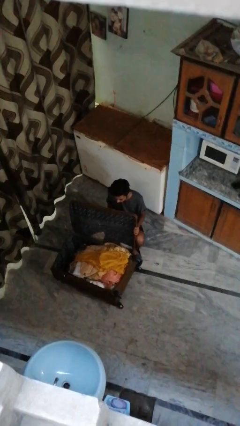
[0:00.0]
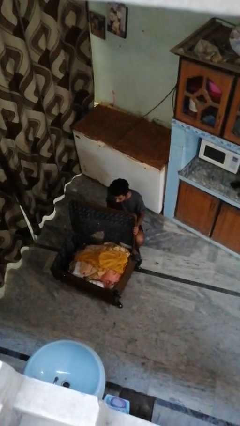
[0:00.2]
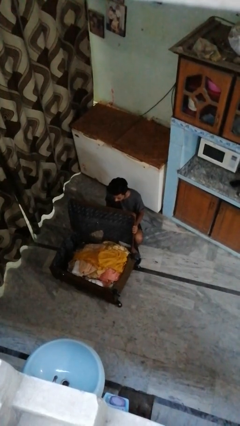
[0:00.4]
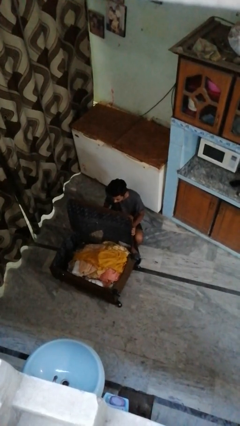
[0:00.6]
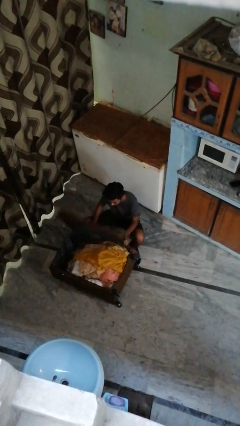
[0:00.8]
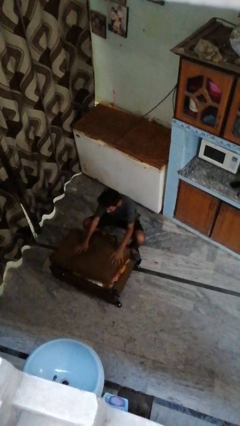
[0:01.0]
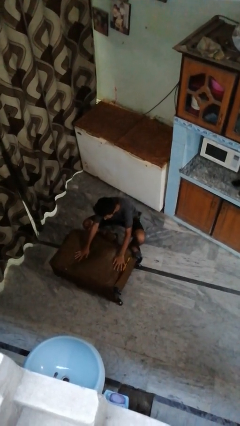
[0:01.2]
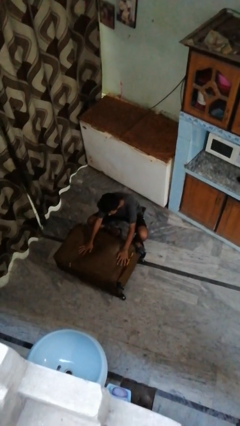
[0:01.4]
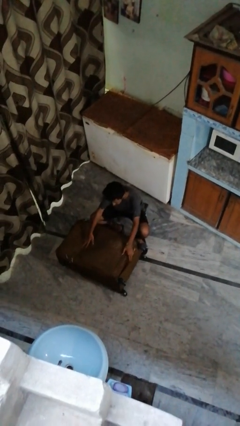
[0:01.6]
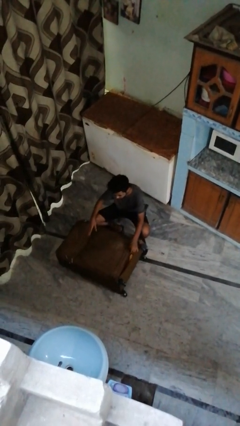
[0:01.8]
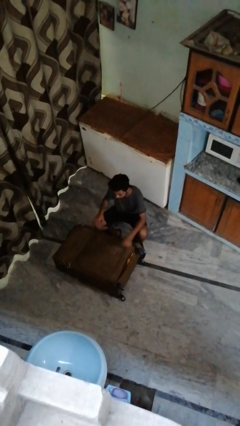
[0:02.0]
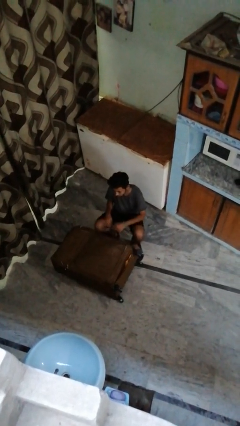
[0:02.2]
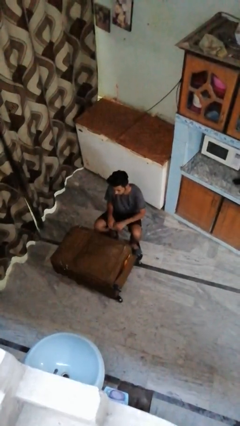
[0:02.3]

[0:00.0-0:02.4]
person closes suitcase

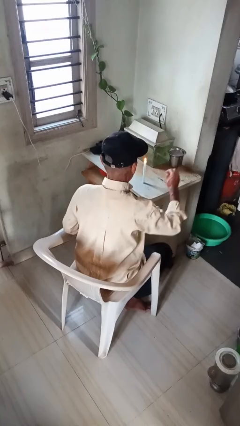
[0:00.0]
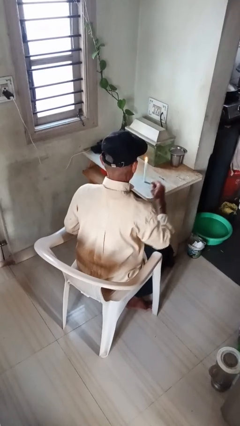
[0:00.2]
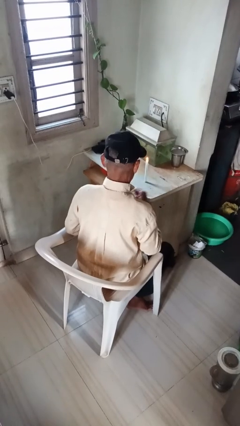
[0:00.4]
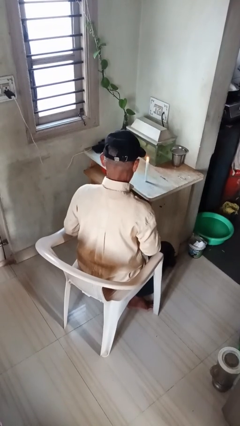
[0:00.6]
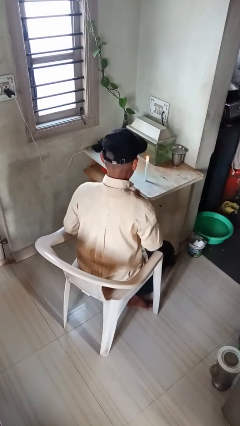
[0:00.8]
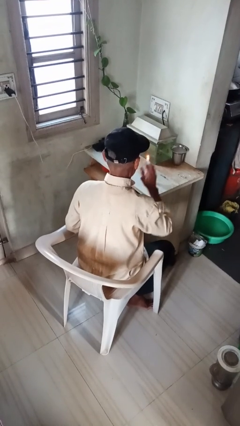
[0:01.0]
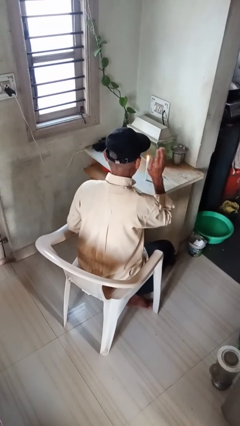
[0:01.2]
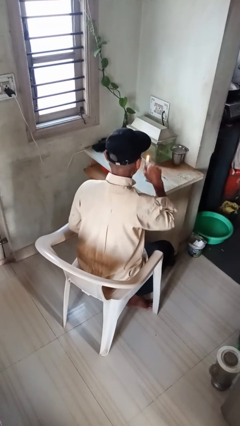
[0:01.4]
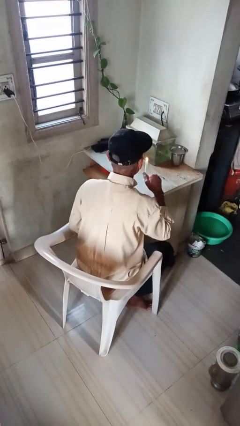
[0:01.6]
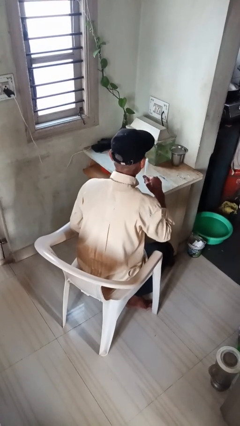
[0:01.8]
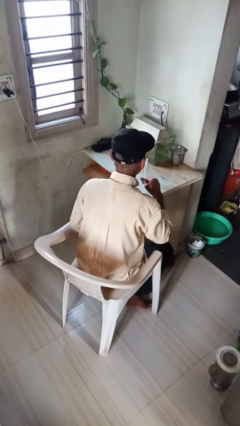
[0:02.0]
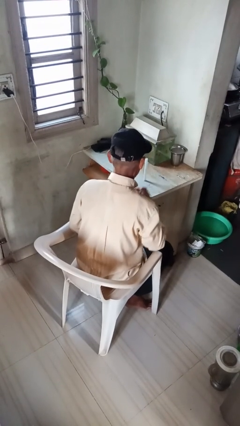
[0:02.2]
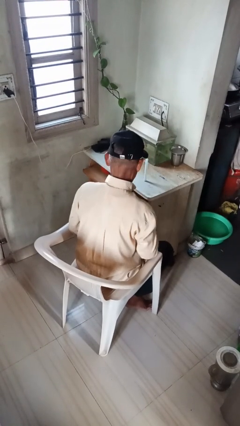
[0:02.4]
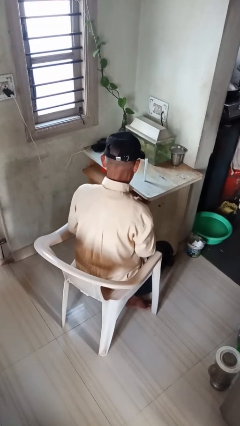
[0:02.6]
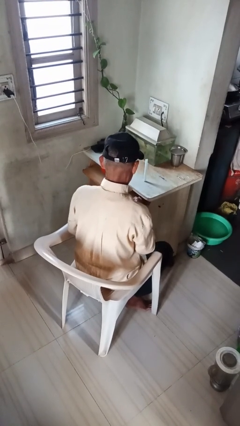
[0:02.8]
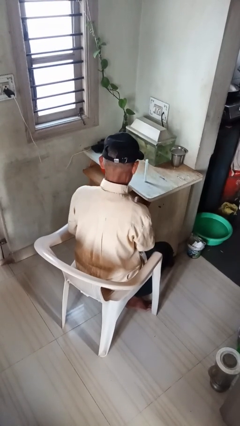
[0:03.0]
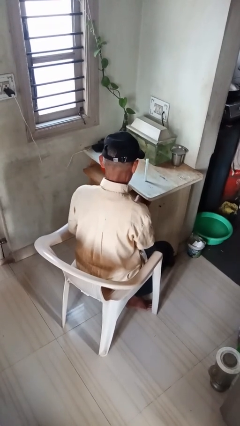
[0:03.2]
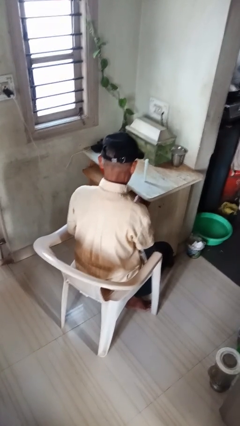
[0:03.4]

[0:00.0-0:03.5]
person extinguishes candle

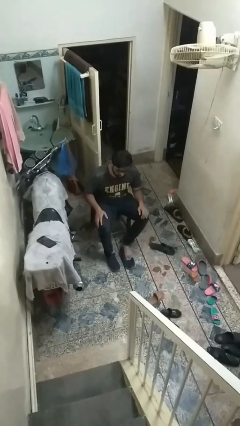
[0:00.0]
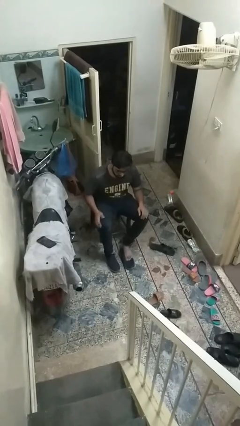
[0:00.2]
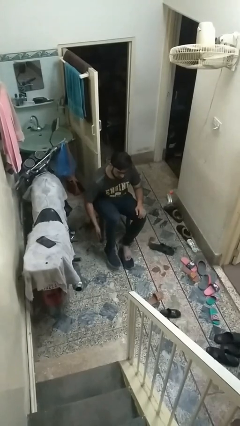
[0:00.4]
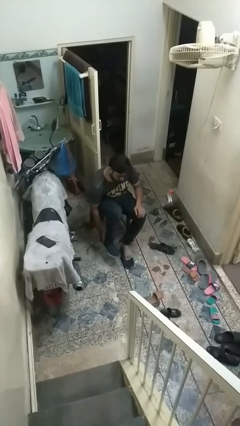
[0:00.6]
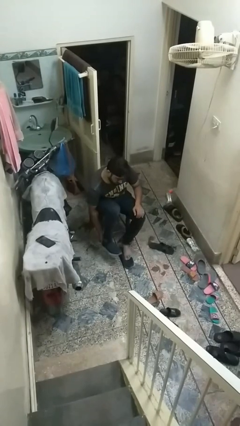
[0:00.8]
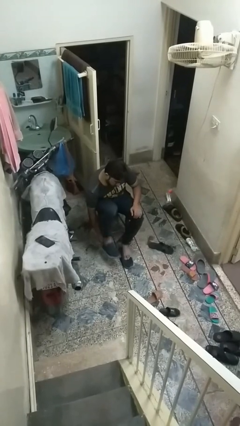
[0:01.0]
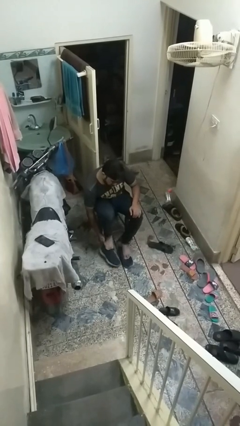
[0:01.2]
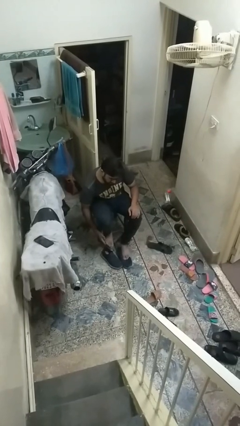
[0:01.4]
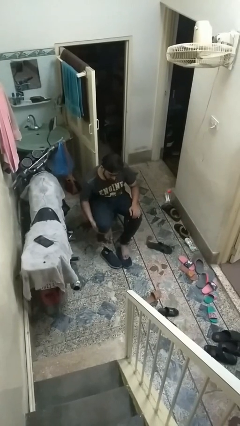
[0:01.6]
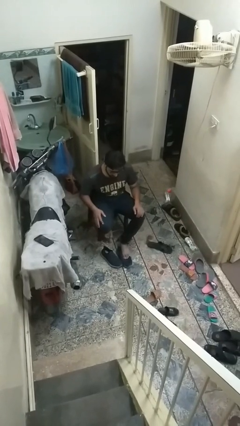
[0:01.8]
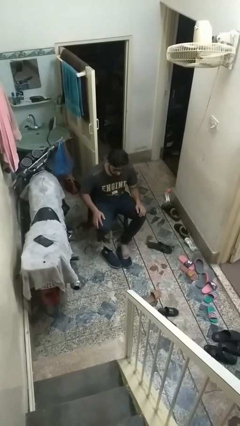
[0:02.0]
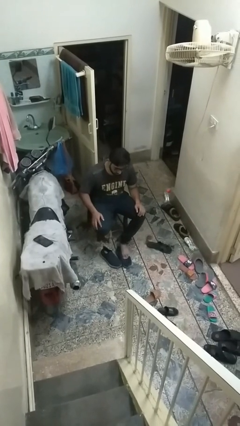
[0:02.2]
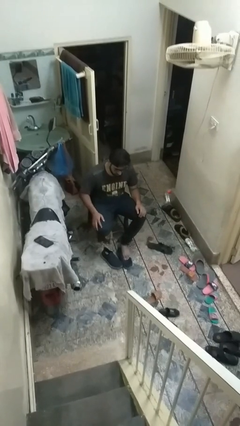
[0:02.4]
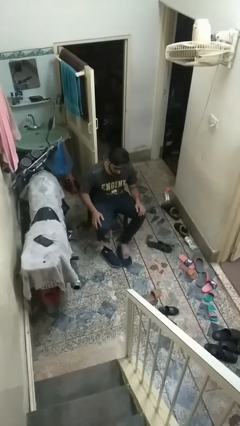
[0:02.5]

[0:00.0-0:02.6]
person takes off shoes

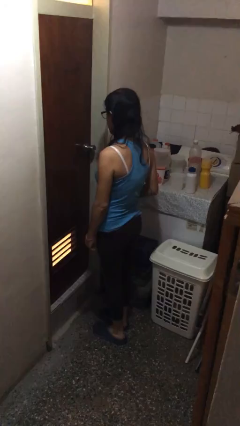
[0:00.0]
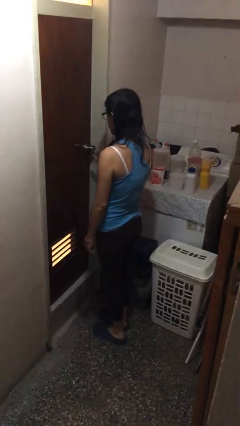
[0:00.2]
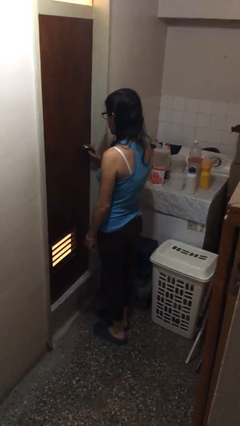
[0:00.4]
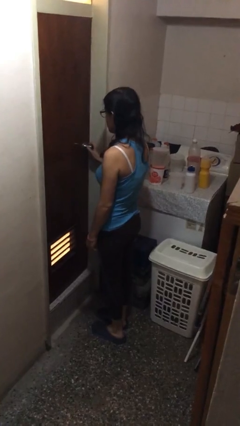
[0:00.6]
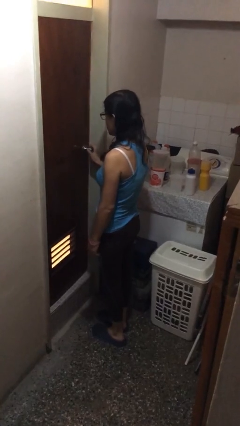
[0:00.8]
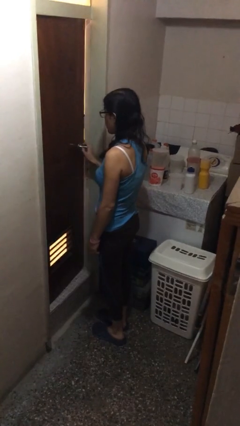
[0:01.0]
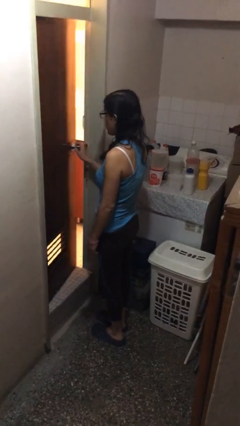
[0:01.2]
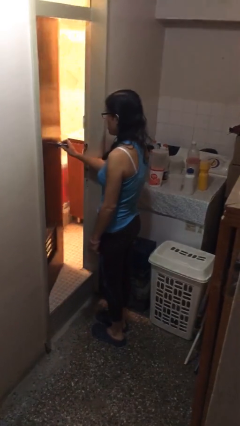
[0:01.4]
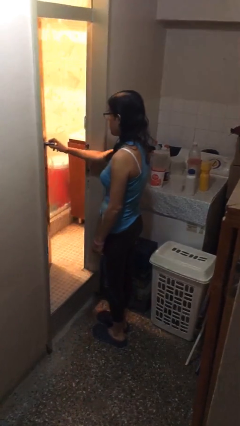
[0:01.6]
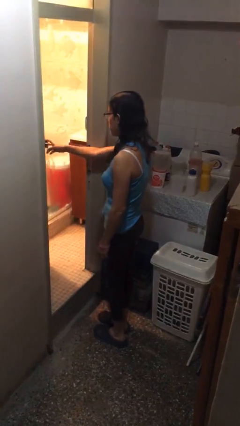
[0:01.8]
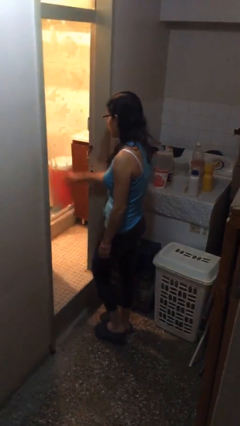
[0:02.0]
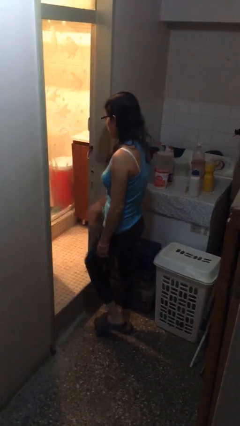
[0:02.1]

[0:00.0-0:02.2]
person opens facility door

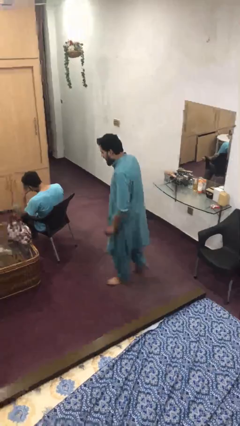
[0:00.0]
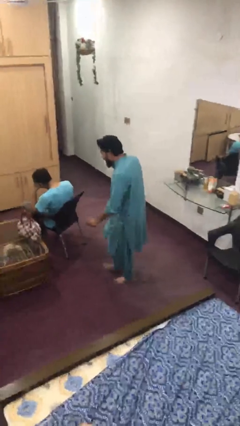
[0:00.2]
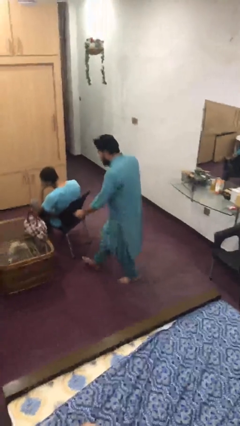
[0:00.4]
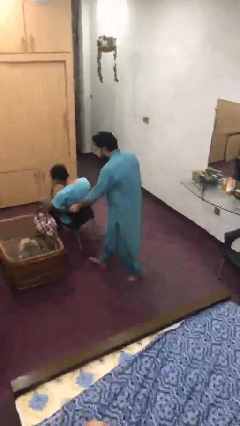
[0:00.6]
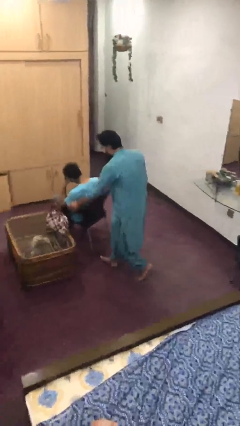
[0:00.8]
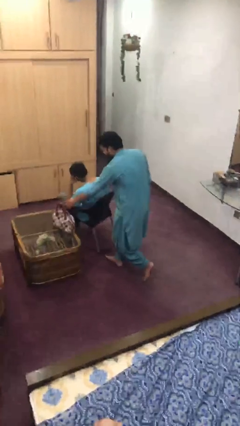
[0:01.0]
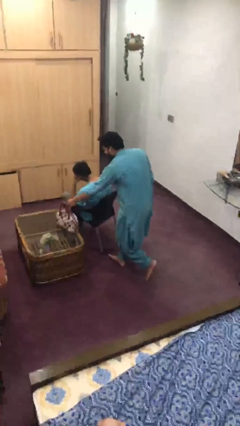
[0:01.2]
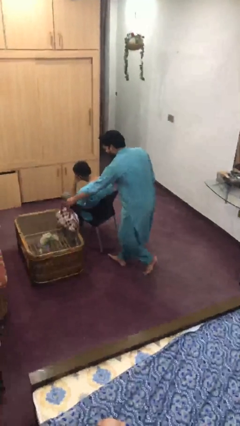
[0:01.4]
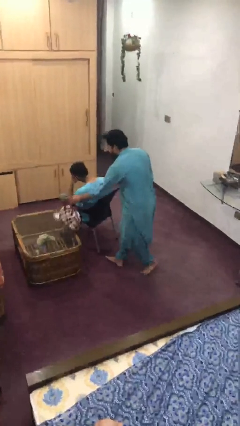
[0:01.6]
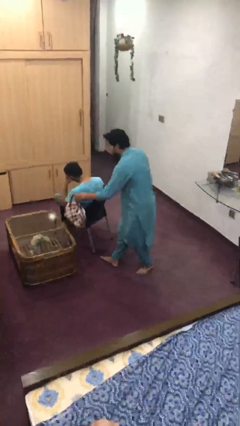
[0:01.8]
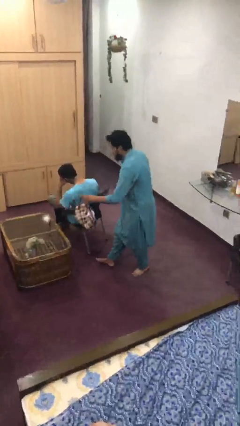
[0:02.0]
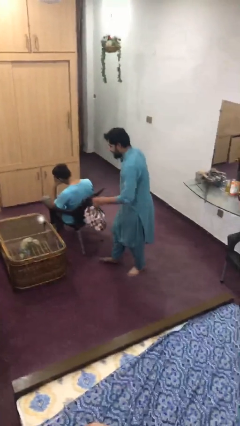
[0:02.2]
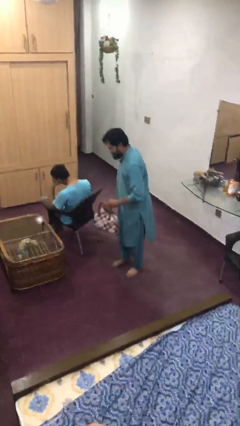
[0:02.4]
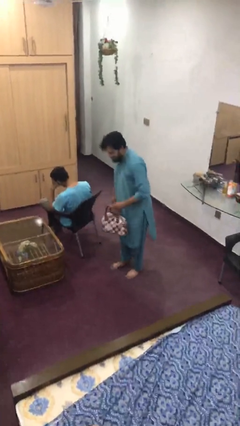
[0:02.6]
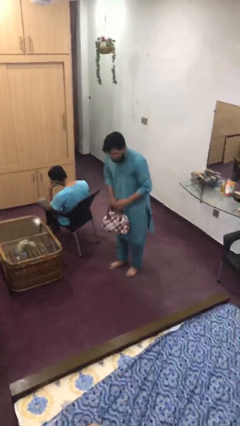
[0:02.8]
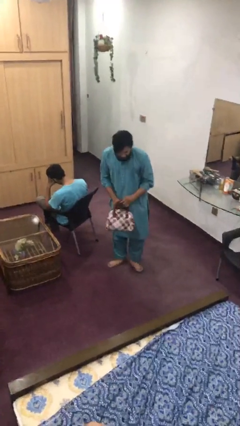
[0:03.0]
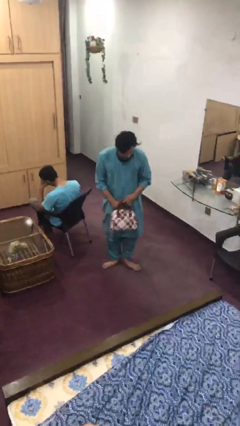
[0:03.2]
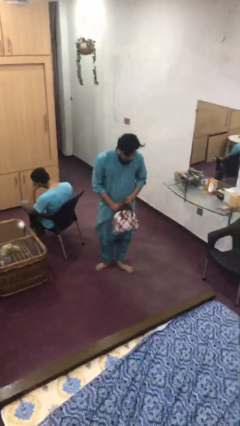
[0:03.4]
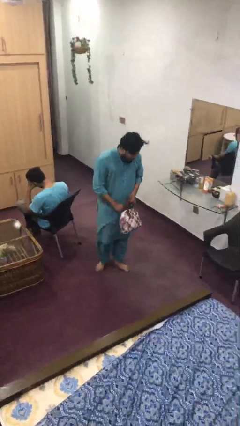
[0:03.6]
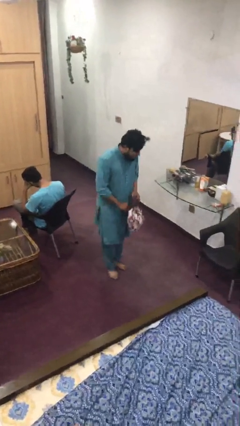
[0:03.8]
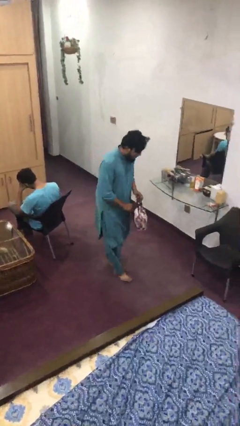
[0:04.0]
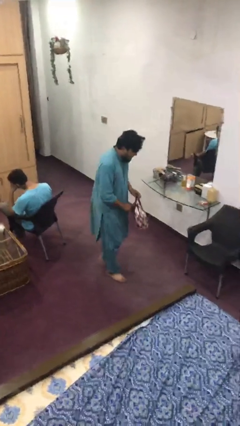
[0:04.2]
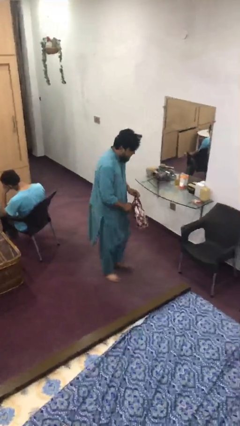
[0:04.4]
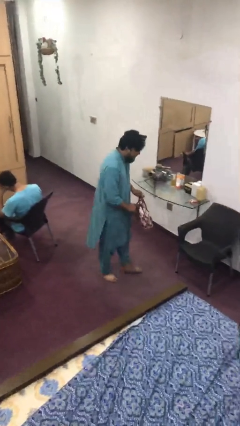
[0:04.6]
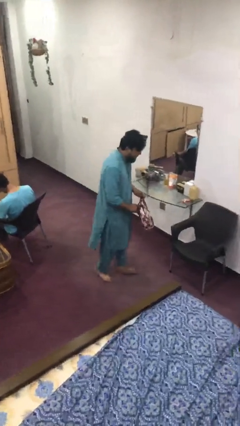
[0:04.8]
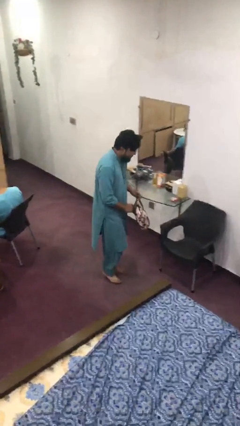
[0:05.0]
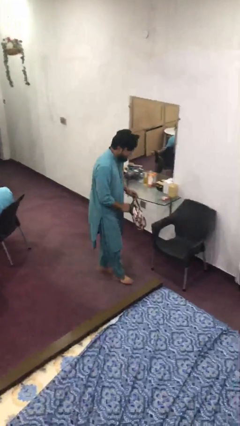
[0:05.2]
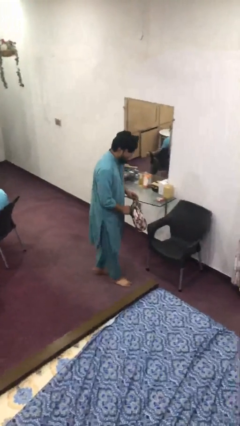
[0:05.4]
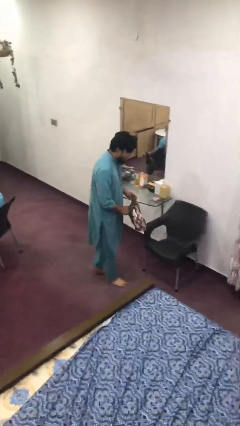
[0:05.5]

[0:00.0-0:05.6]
person steals object from person

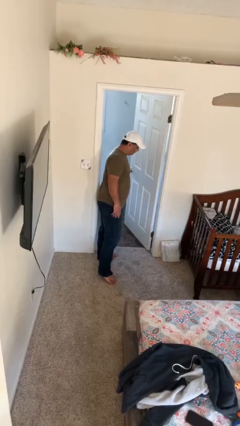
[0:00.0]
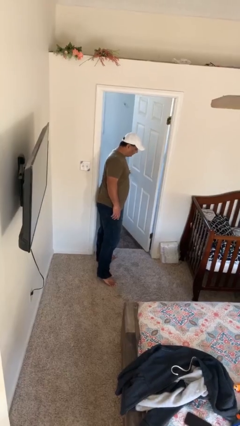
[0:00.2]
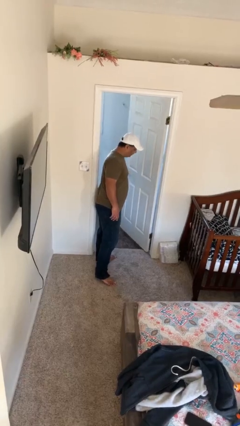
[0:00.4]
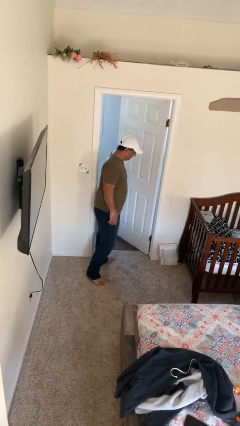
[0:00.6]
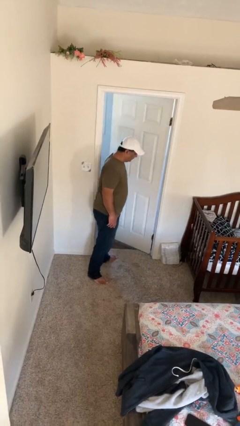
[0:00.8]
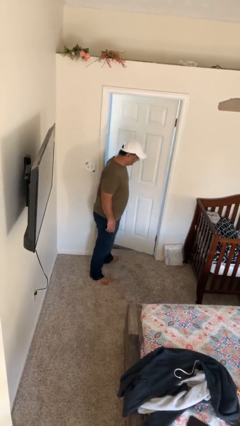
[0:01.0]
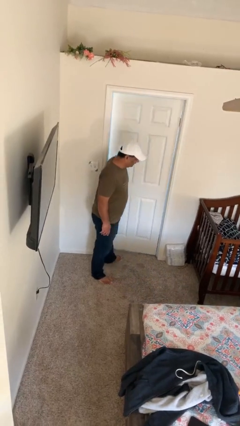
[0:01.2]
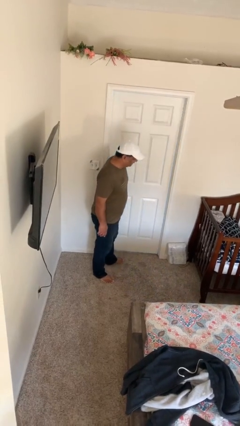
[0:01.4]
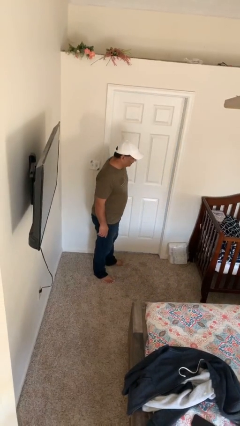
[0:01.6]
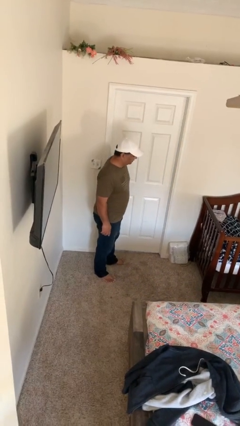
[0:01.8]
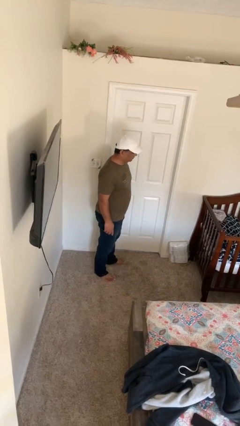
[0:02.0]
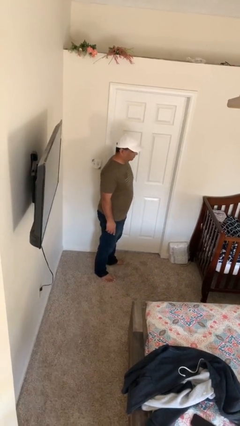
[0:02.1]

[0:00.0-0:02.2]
person closes facility door
